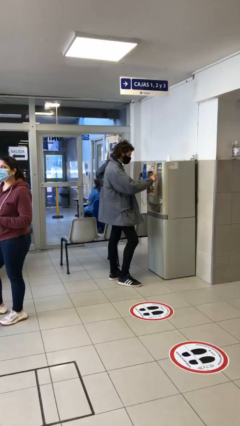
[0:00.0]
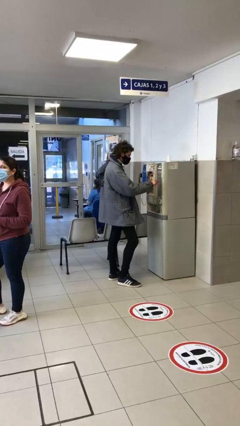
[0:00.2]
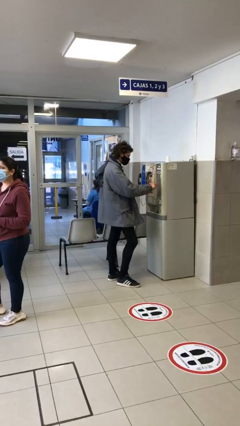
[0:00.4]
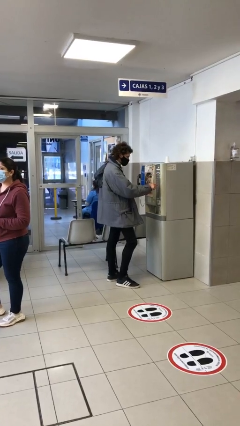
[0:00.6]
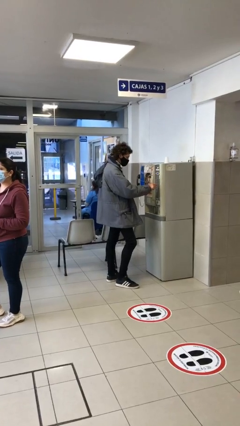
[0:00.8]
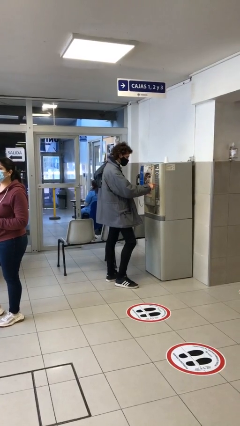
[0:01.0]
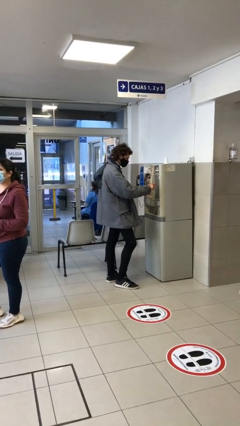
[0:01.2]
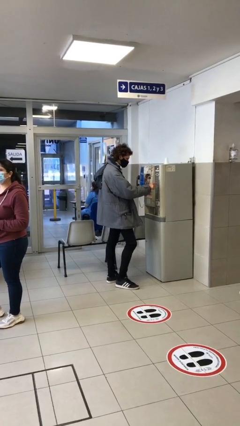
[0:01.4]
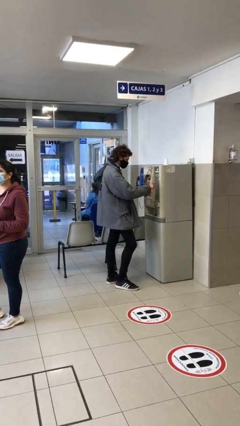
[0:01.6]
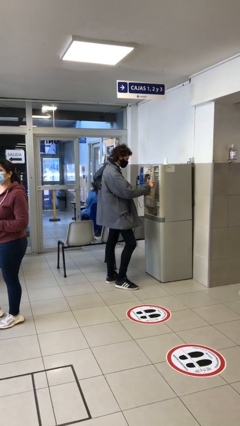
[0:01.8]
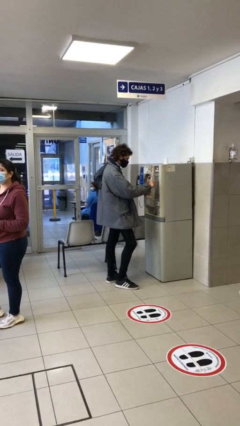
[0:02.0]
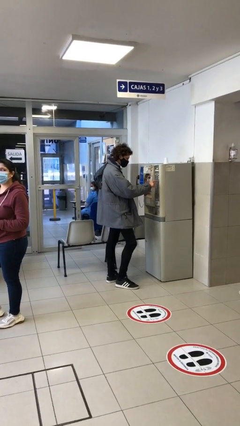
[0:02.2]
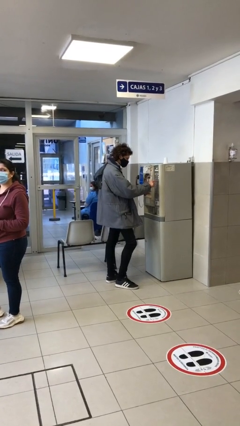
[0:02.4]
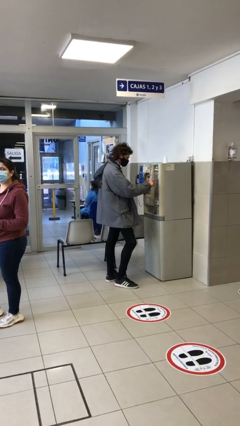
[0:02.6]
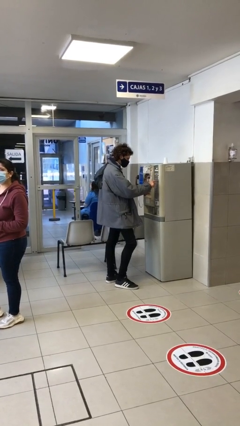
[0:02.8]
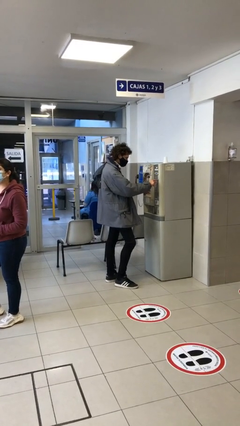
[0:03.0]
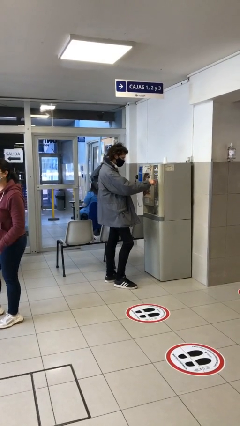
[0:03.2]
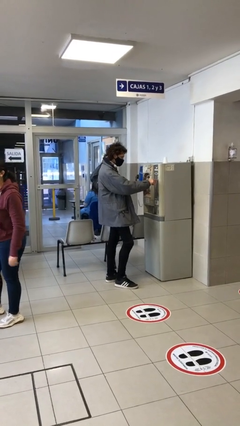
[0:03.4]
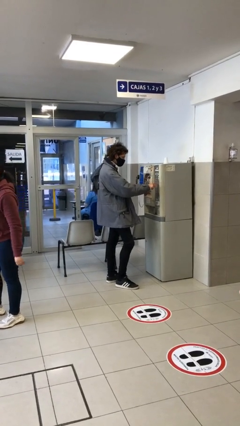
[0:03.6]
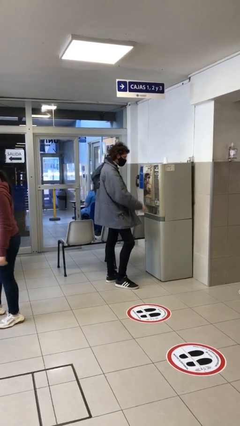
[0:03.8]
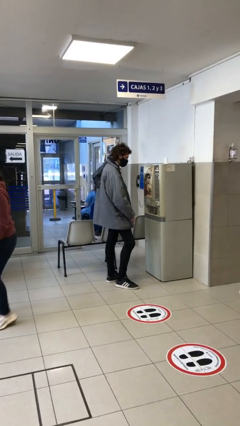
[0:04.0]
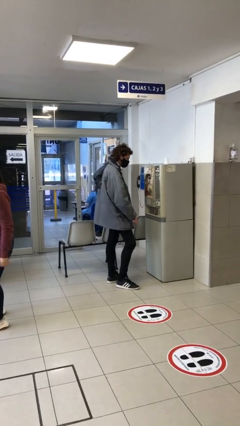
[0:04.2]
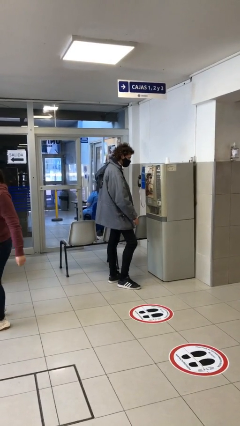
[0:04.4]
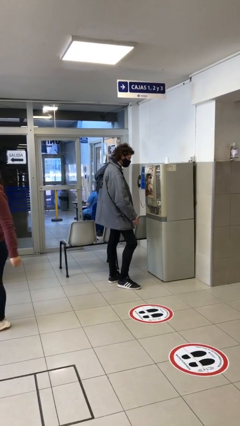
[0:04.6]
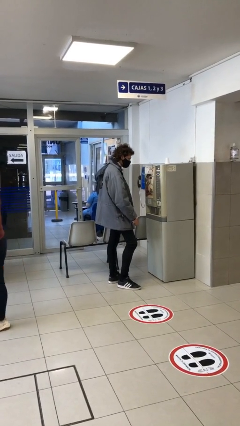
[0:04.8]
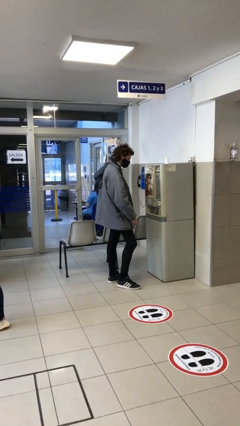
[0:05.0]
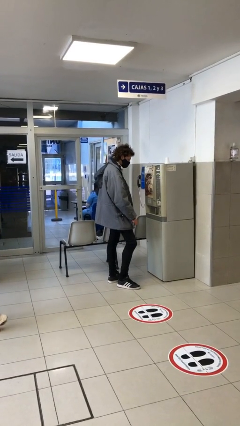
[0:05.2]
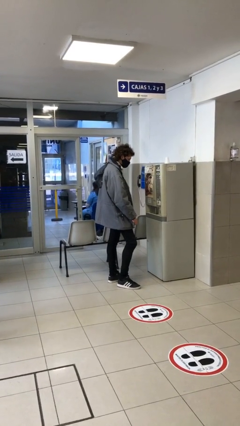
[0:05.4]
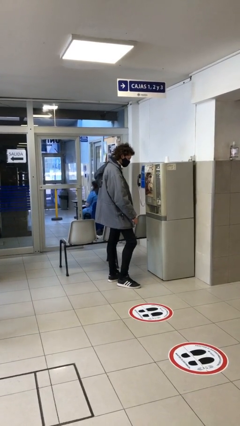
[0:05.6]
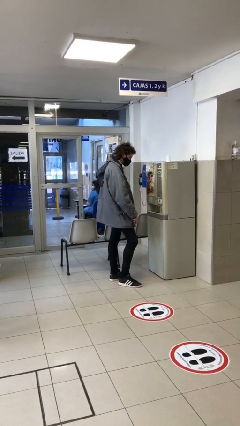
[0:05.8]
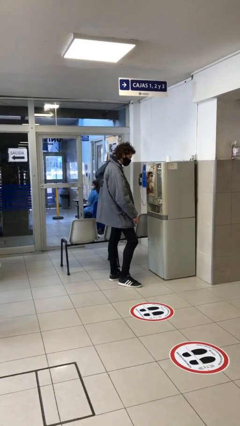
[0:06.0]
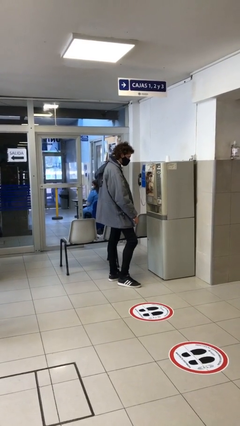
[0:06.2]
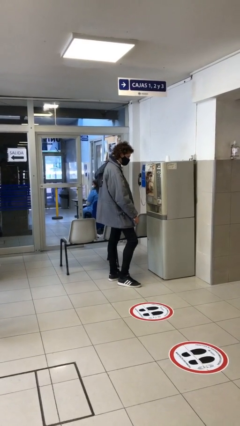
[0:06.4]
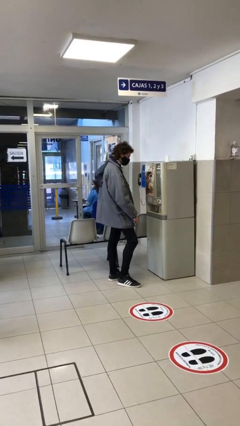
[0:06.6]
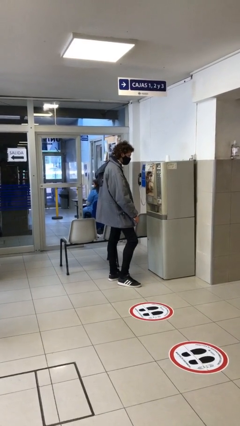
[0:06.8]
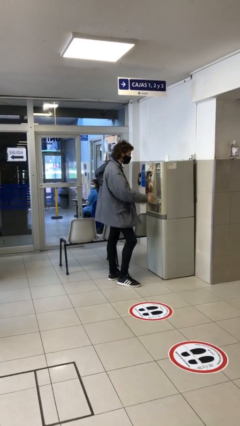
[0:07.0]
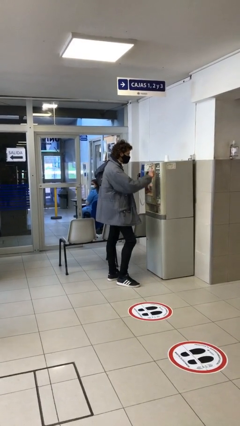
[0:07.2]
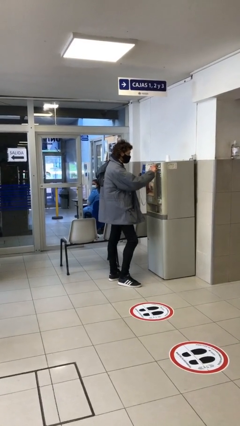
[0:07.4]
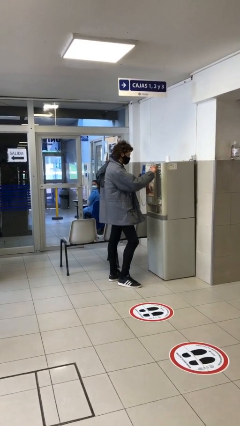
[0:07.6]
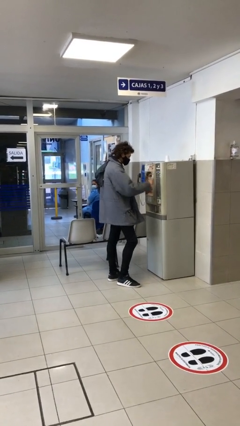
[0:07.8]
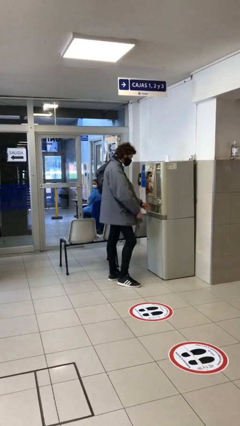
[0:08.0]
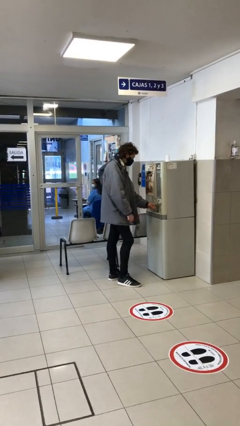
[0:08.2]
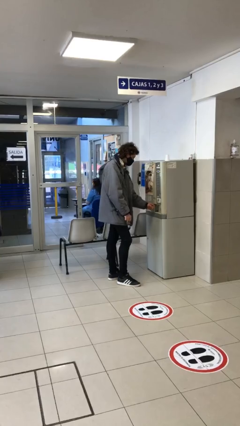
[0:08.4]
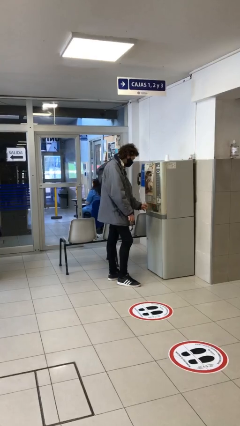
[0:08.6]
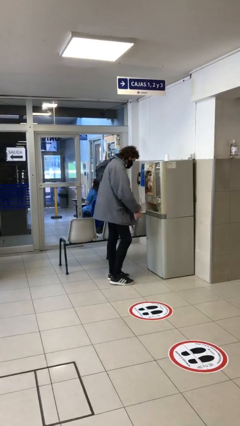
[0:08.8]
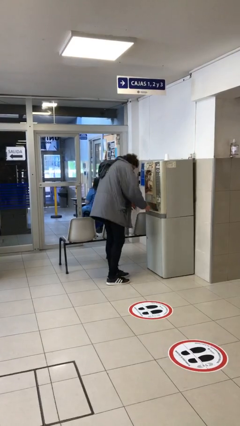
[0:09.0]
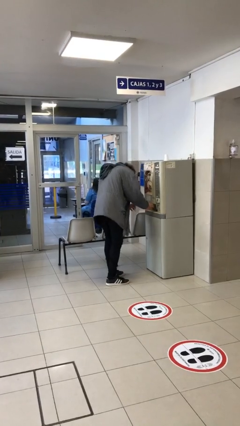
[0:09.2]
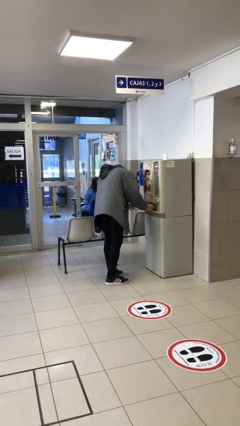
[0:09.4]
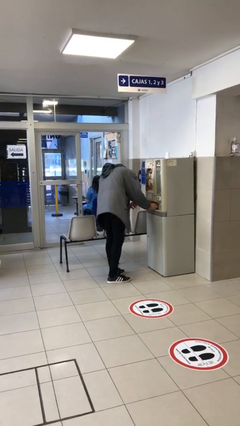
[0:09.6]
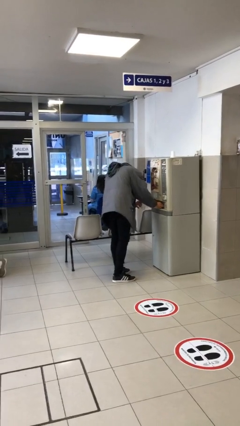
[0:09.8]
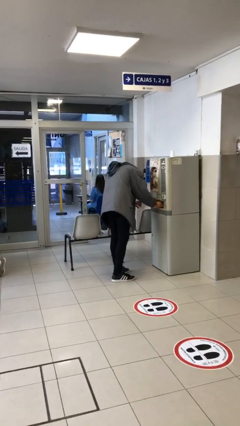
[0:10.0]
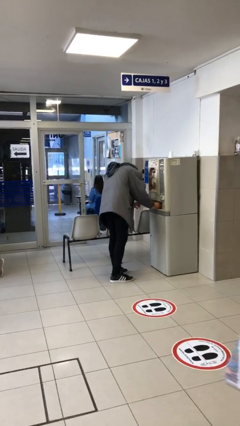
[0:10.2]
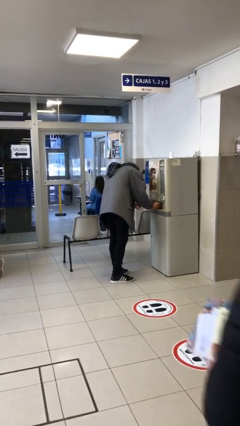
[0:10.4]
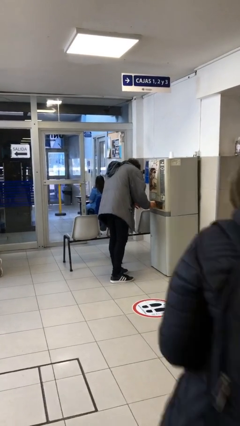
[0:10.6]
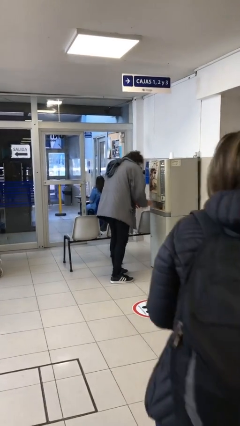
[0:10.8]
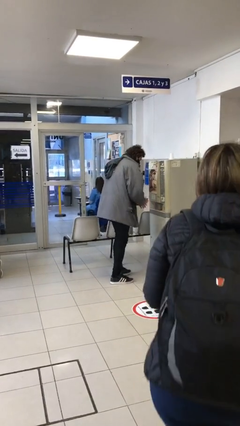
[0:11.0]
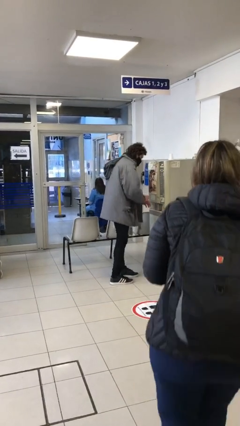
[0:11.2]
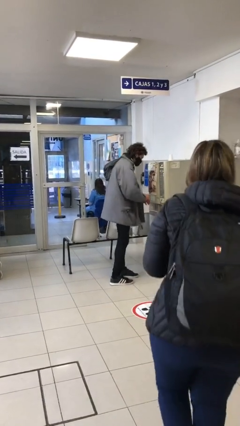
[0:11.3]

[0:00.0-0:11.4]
person purchases from machine

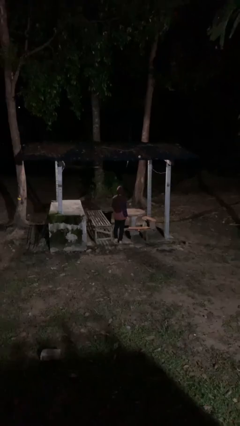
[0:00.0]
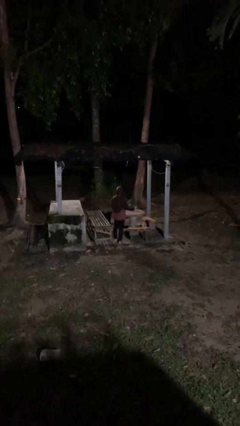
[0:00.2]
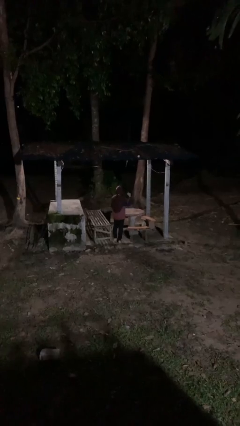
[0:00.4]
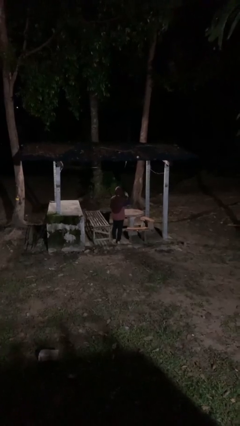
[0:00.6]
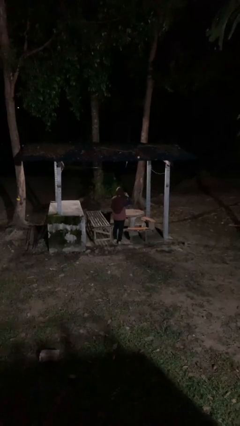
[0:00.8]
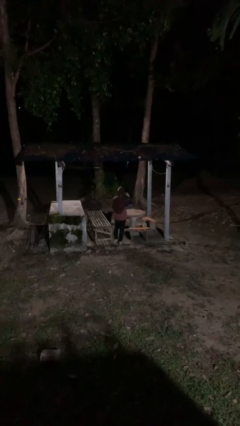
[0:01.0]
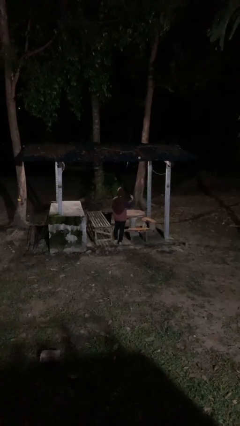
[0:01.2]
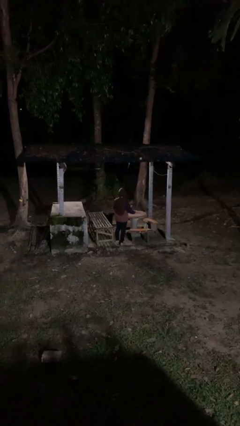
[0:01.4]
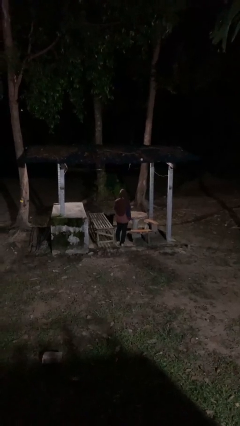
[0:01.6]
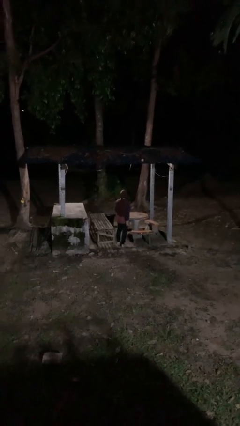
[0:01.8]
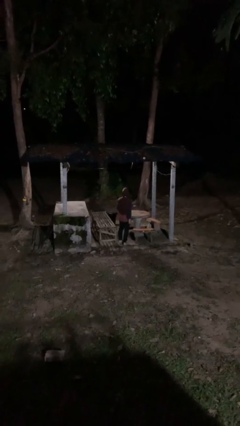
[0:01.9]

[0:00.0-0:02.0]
person gestures listen closely

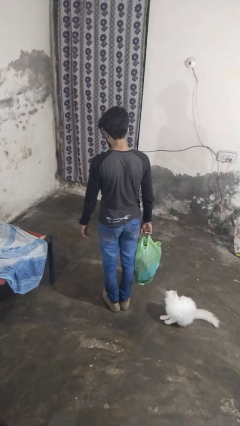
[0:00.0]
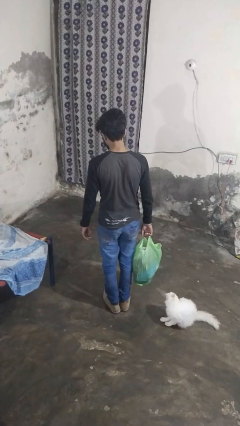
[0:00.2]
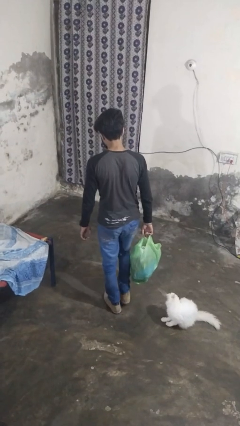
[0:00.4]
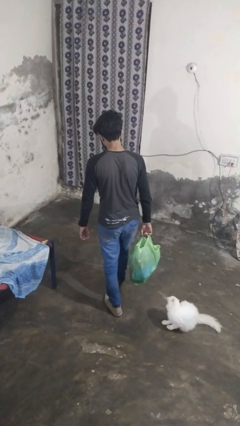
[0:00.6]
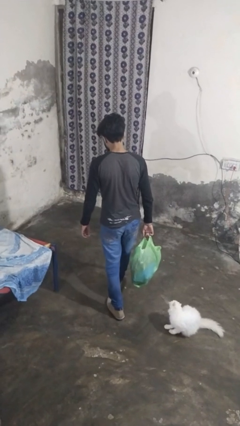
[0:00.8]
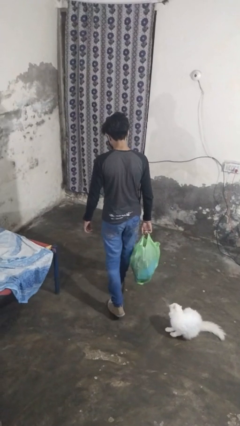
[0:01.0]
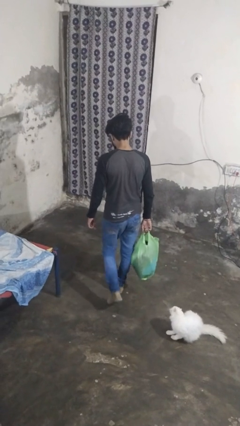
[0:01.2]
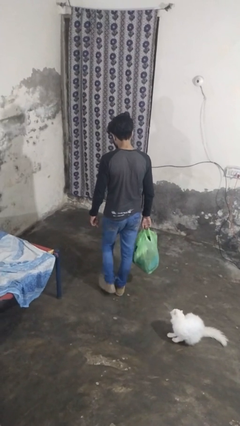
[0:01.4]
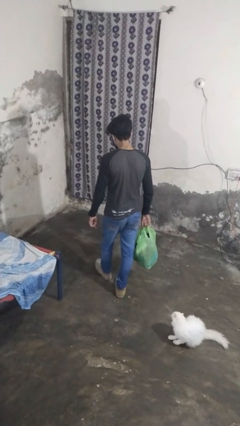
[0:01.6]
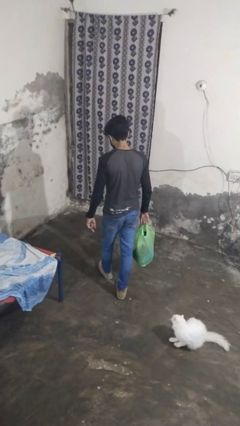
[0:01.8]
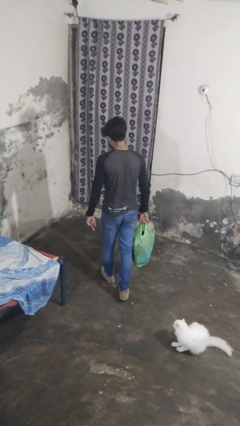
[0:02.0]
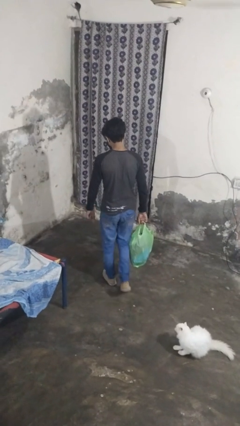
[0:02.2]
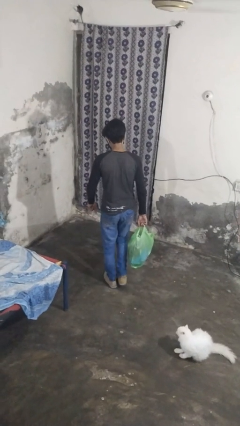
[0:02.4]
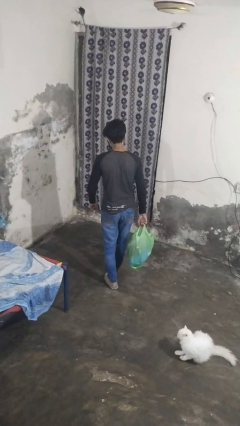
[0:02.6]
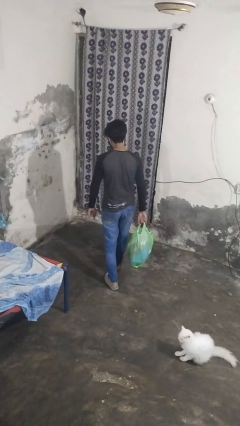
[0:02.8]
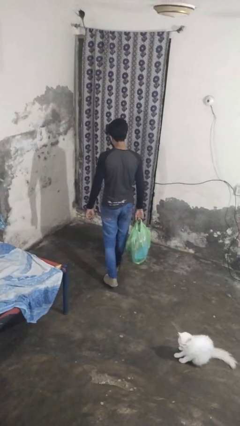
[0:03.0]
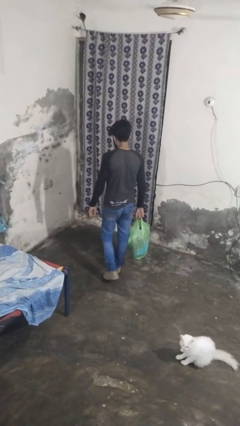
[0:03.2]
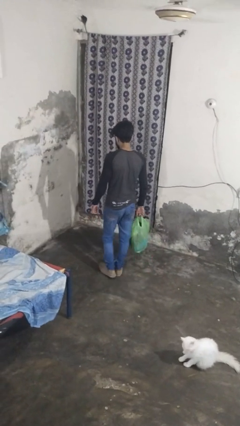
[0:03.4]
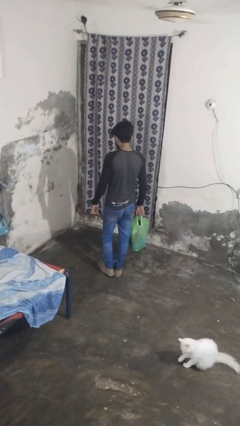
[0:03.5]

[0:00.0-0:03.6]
person carries groceries

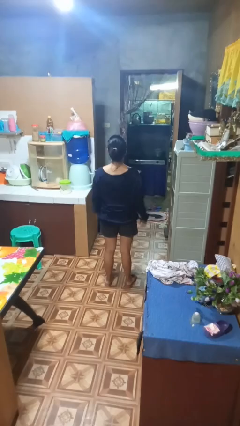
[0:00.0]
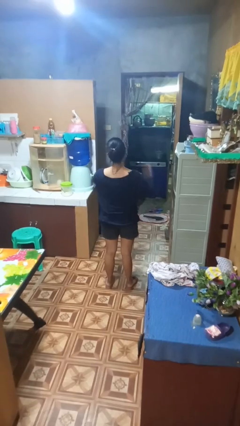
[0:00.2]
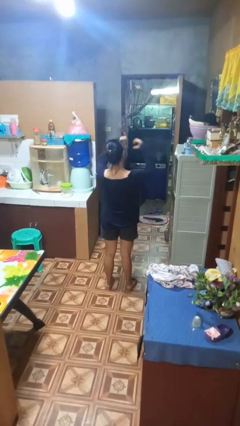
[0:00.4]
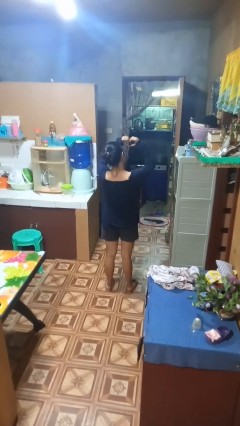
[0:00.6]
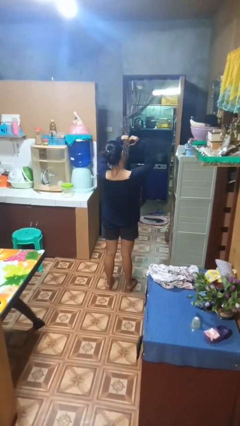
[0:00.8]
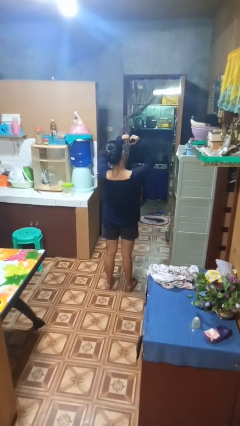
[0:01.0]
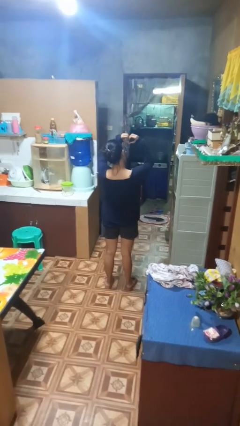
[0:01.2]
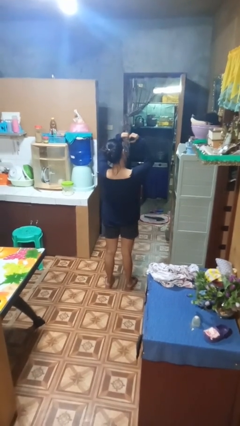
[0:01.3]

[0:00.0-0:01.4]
person gestures heart
